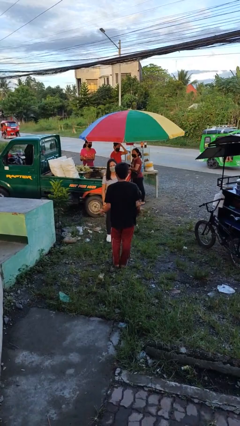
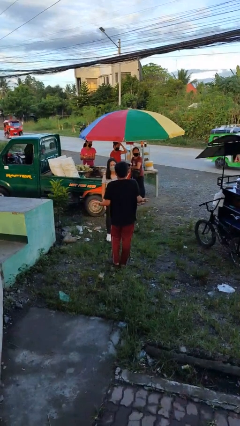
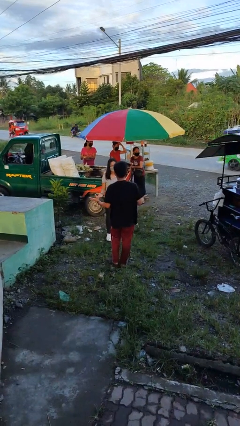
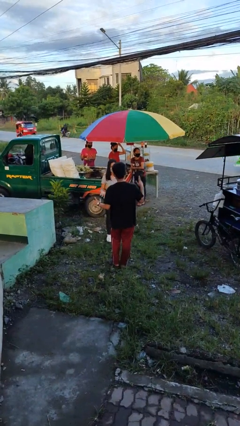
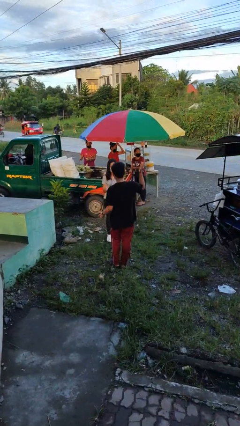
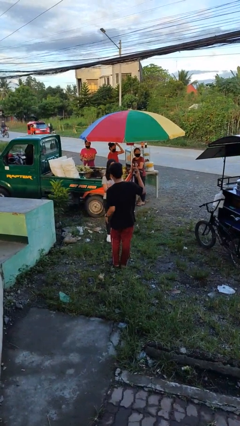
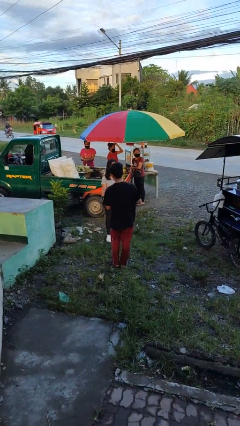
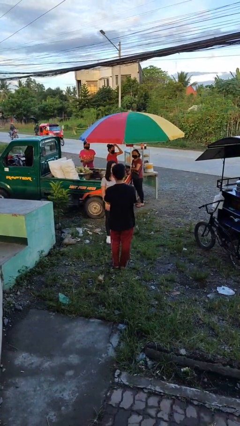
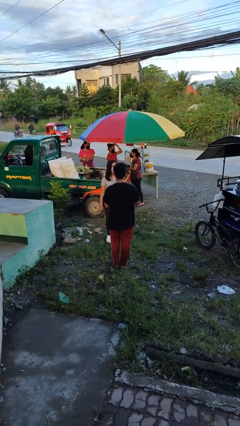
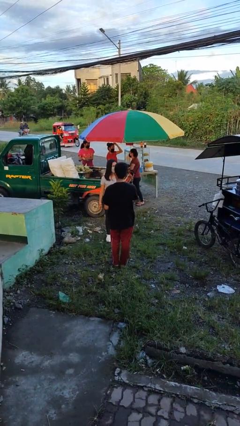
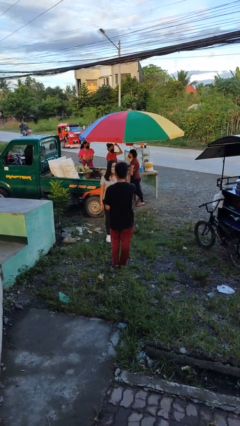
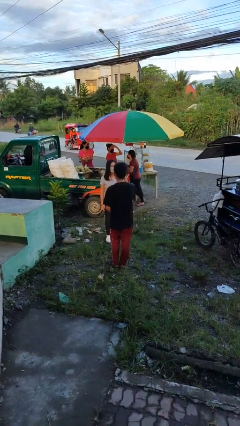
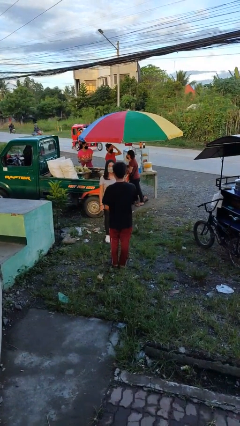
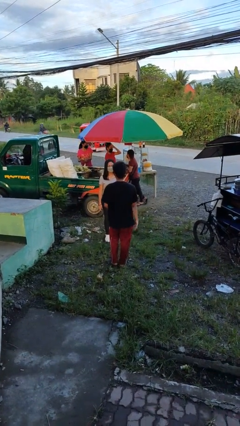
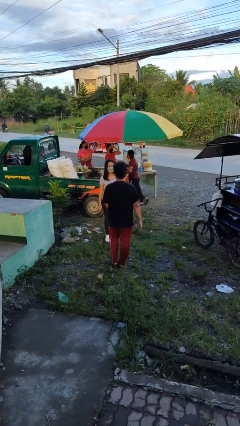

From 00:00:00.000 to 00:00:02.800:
person talks to person

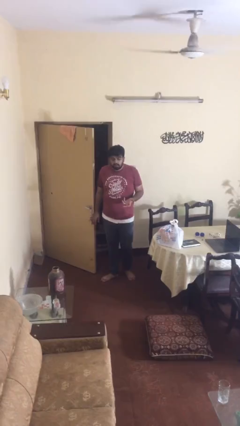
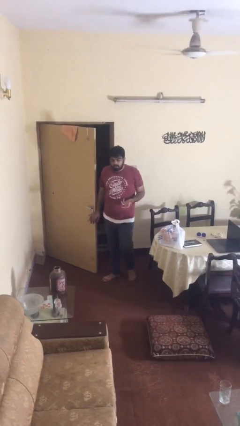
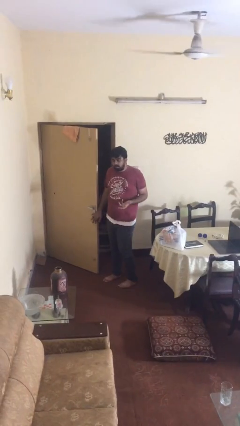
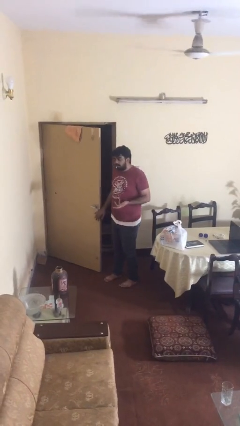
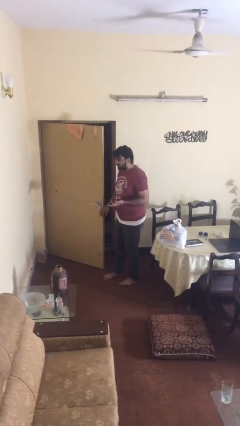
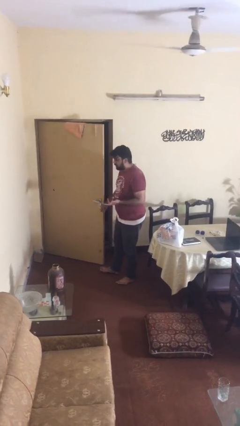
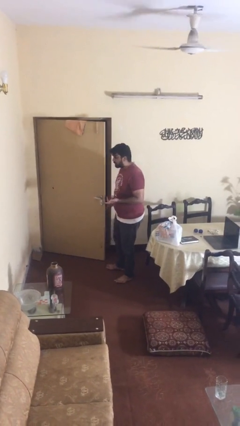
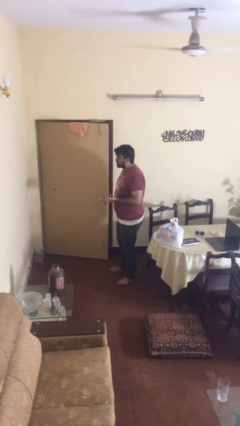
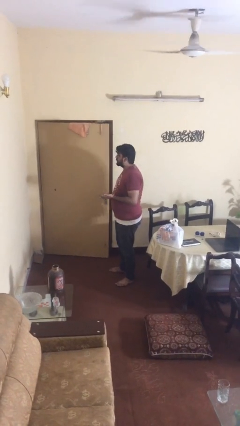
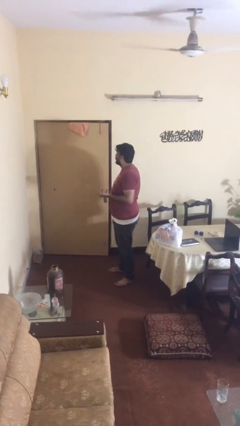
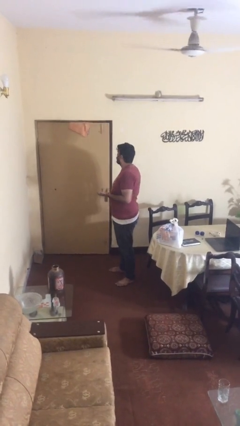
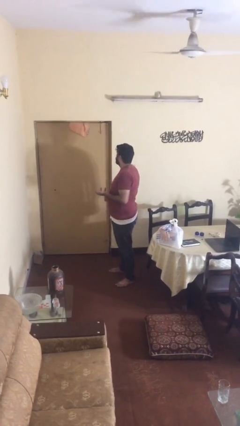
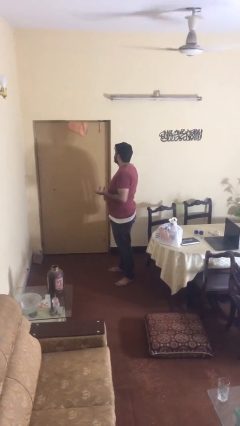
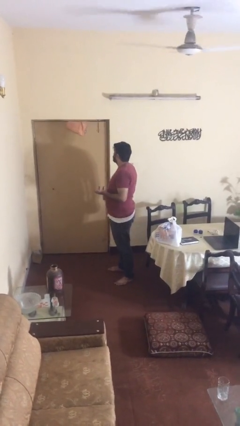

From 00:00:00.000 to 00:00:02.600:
person closes facility door

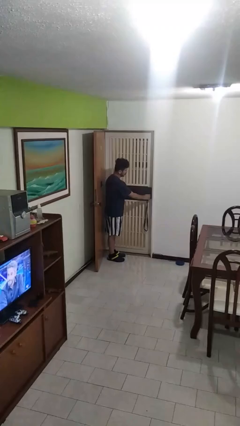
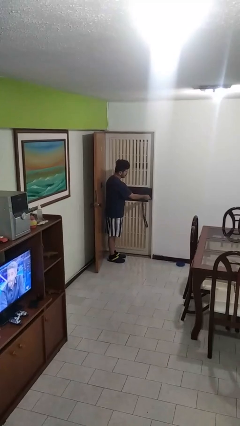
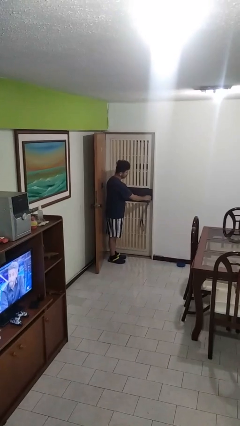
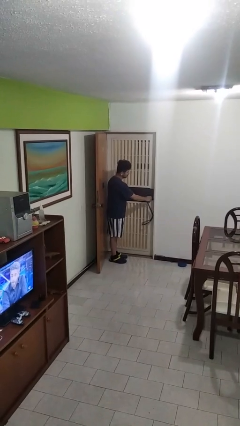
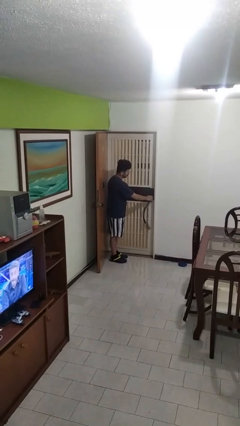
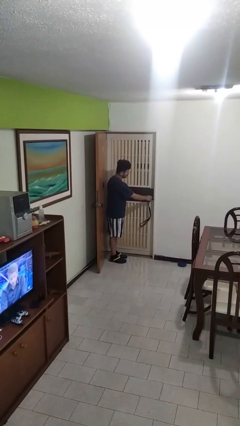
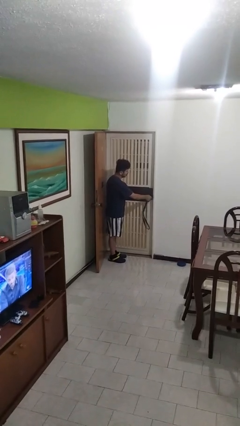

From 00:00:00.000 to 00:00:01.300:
person locks door with keys

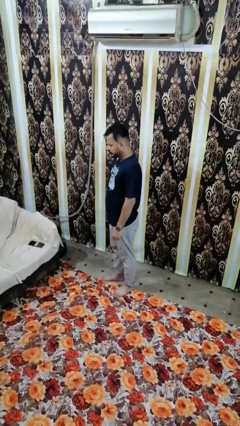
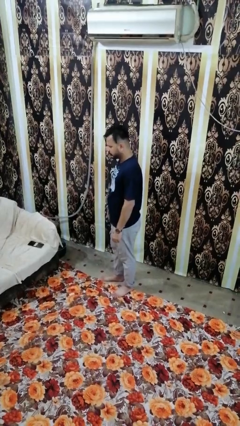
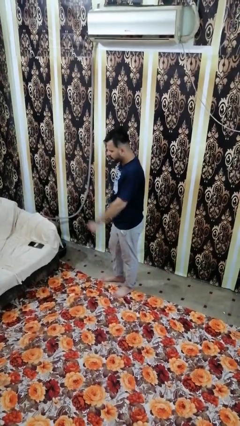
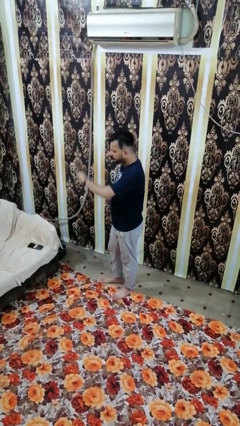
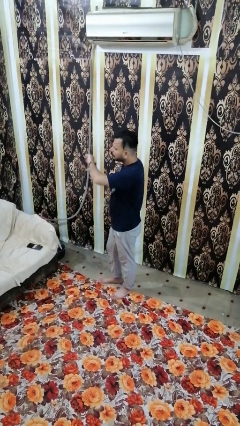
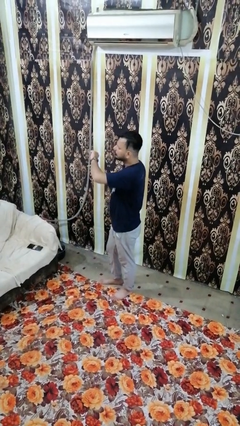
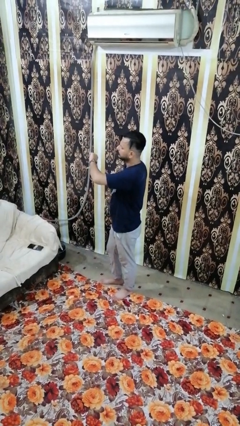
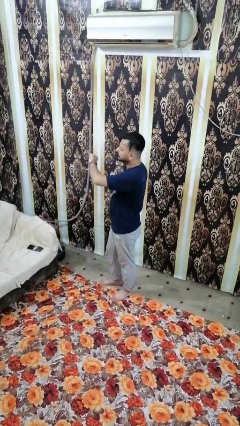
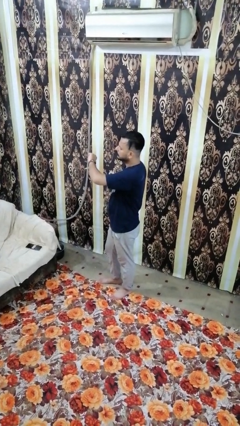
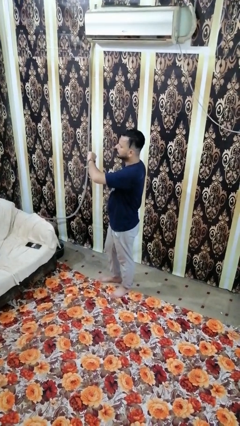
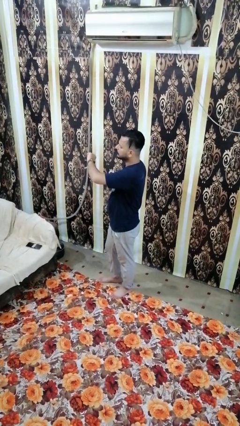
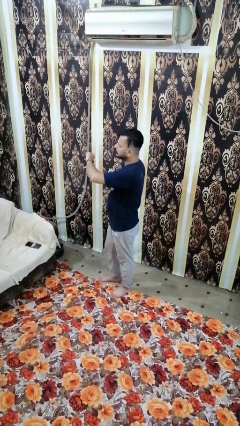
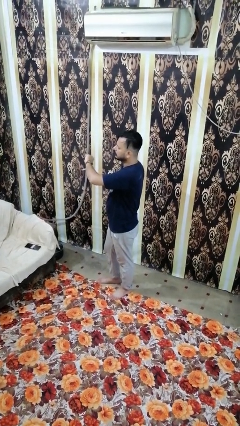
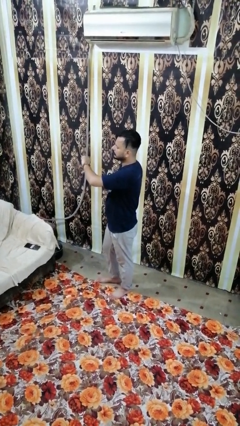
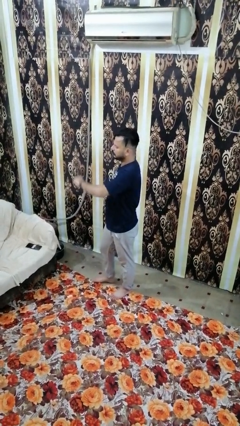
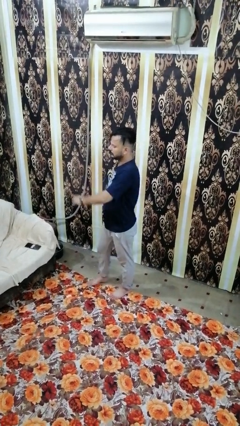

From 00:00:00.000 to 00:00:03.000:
person looks at wristwatch

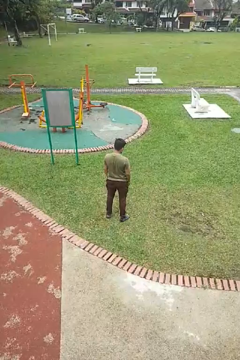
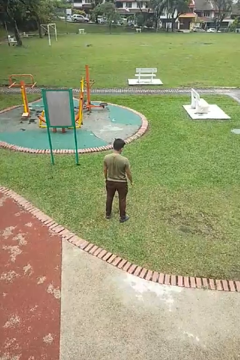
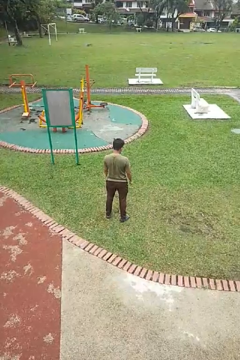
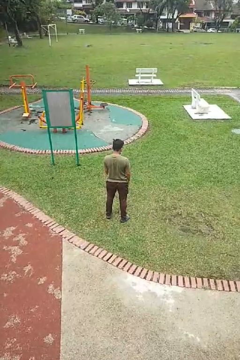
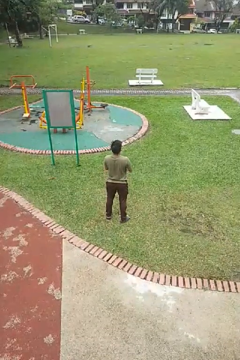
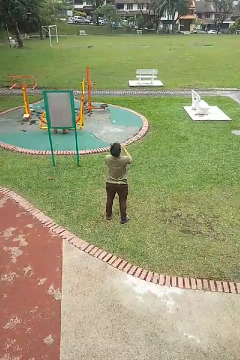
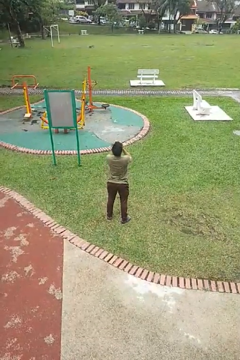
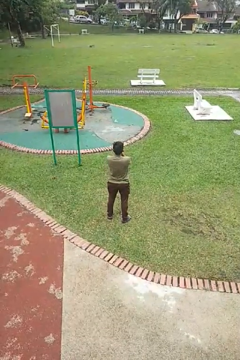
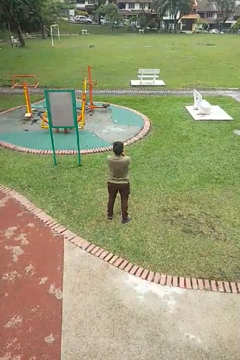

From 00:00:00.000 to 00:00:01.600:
person sneezes into hand

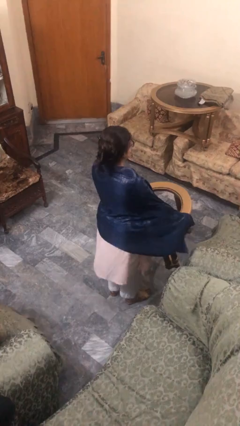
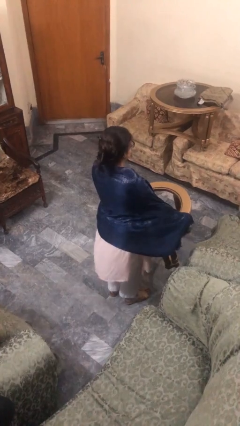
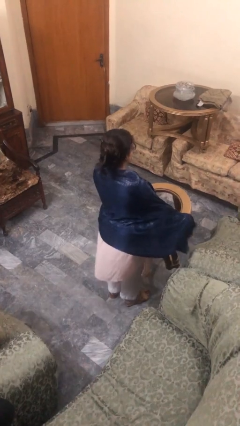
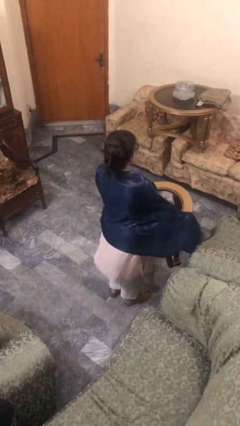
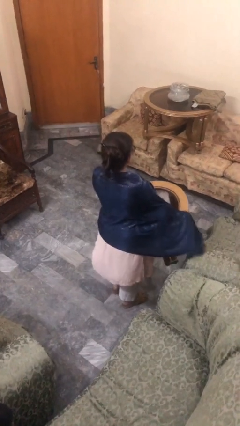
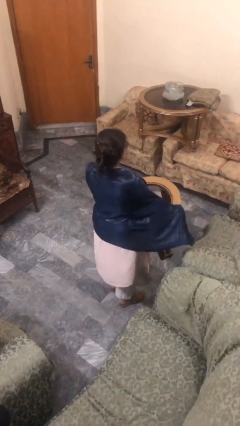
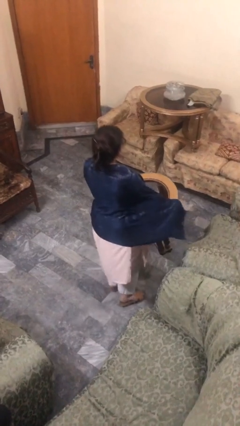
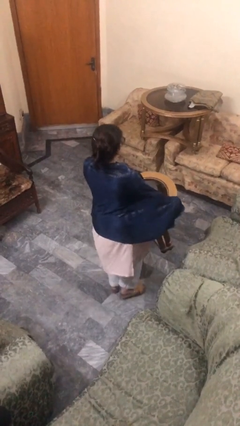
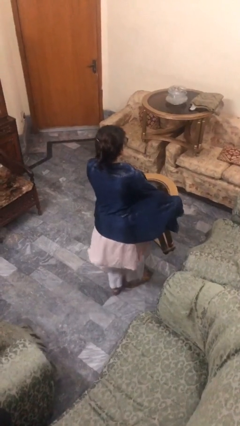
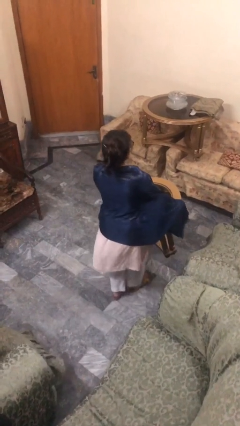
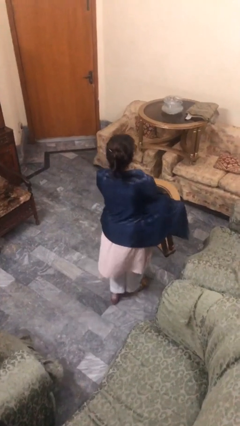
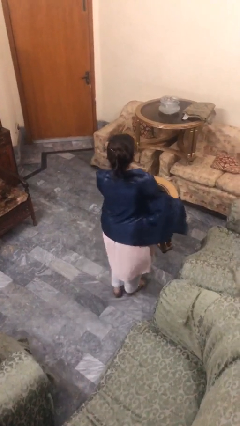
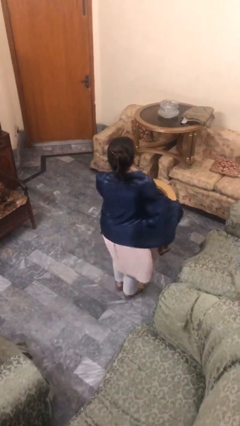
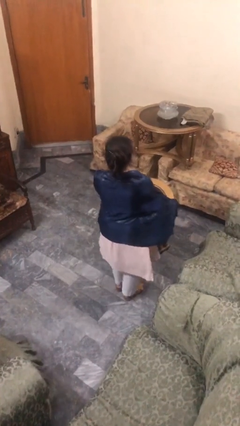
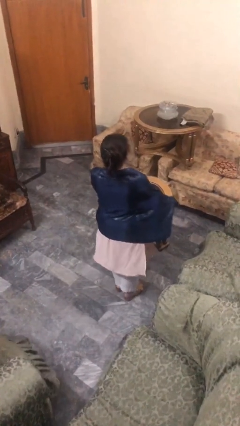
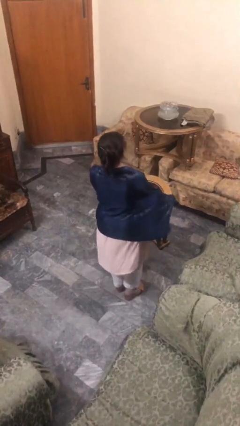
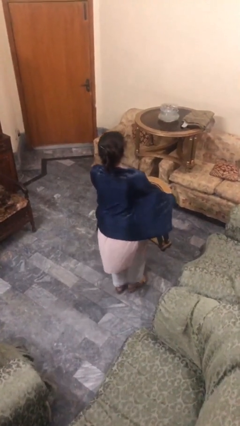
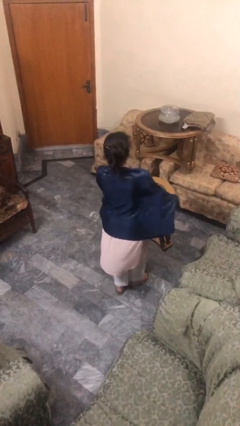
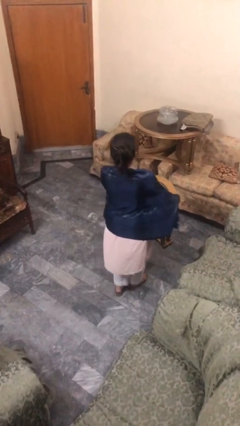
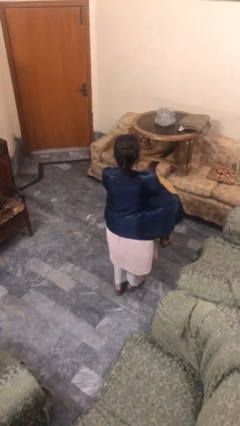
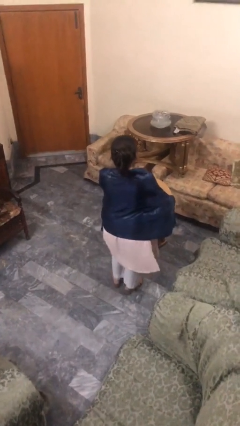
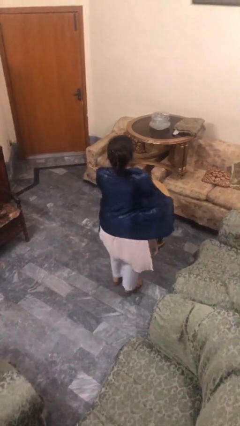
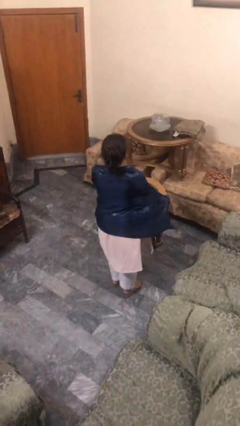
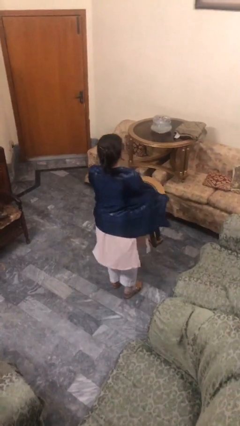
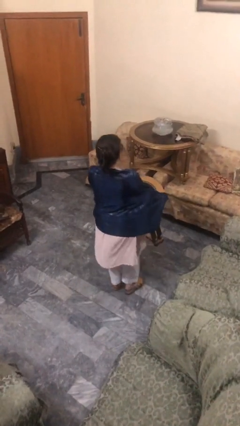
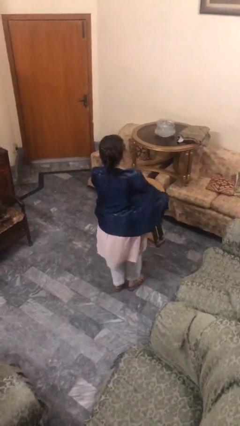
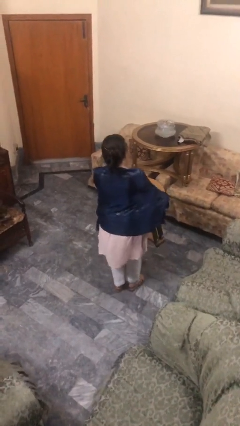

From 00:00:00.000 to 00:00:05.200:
person carries furniture

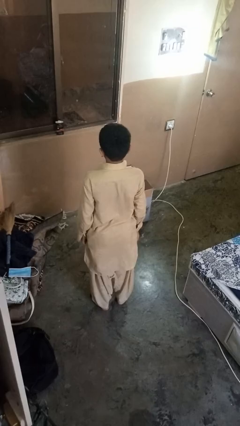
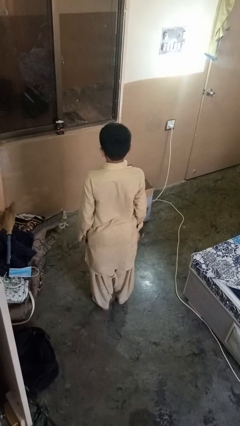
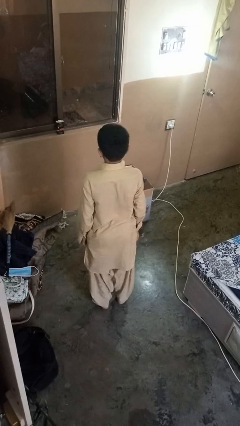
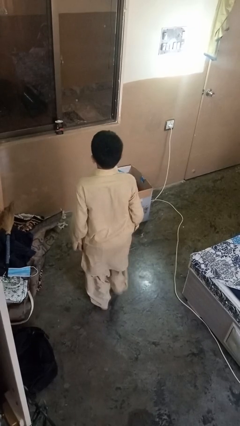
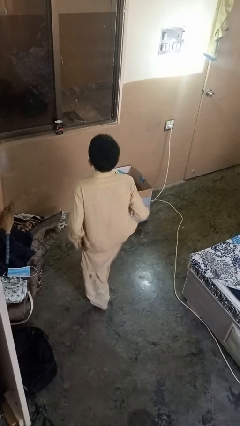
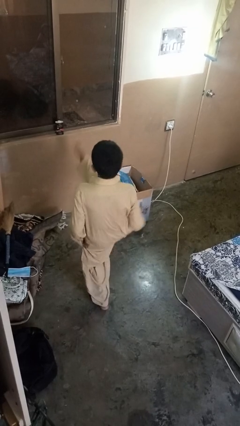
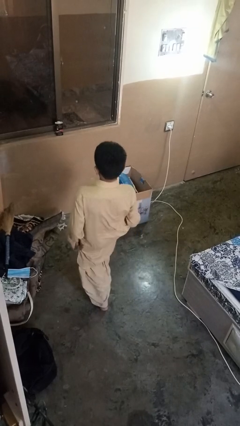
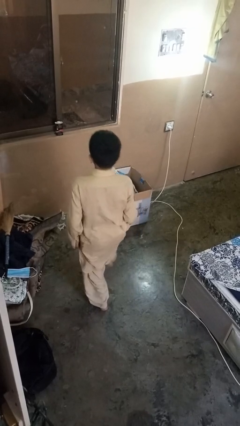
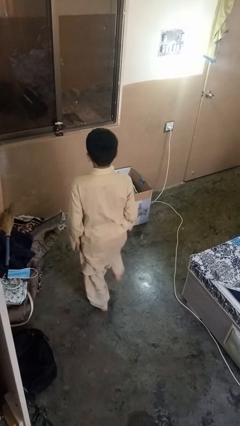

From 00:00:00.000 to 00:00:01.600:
person karate kicks
